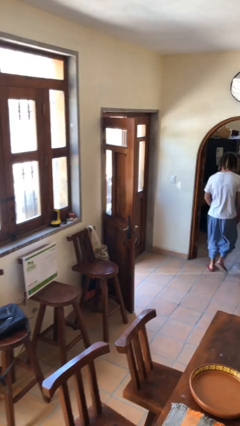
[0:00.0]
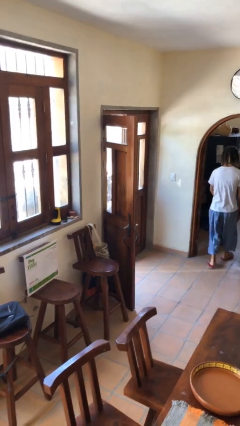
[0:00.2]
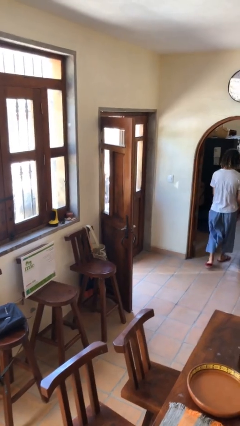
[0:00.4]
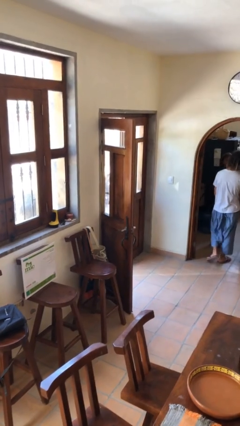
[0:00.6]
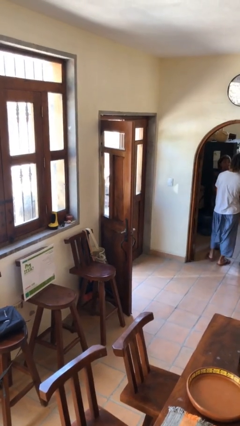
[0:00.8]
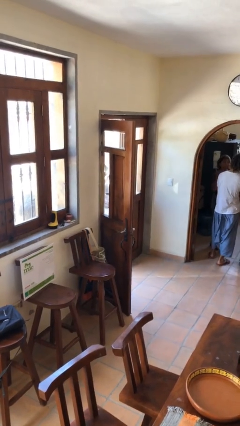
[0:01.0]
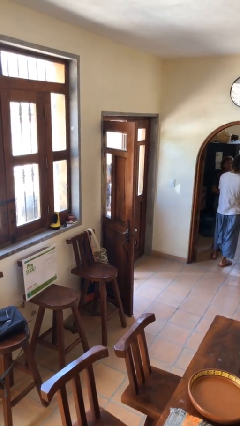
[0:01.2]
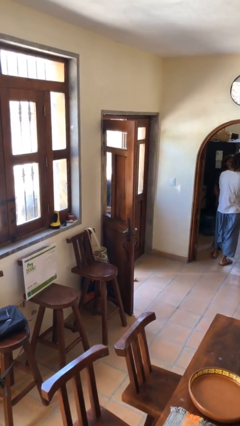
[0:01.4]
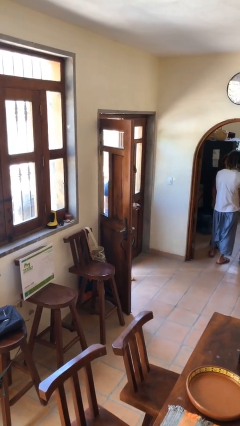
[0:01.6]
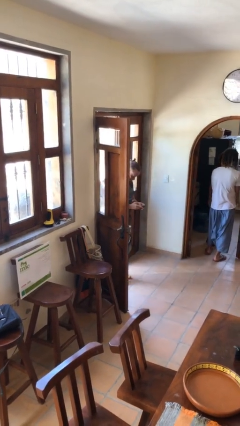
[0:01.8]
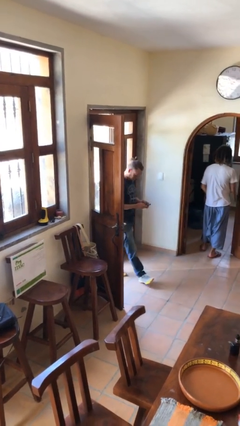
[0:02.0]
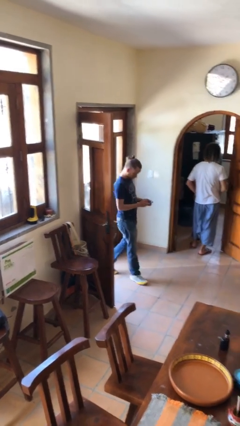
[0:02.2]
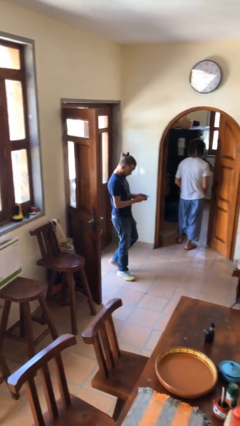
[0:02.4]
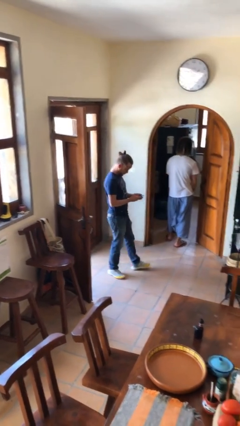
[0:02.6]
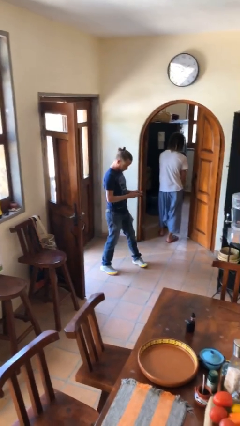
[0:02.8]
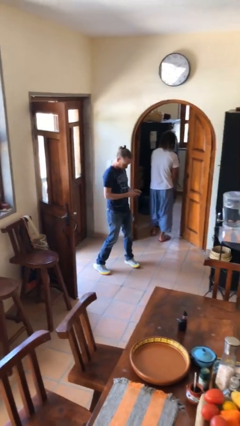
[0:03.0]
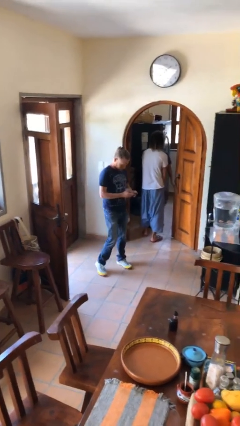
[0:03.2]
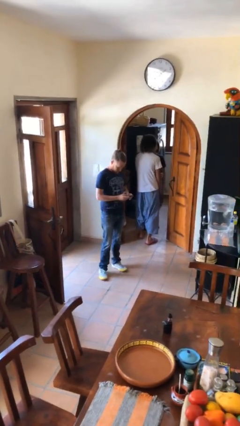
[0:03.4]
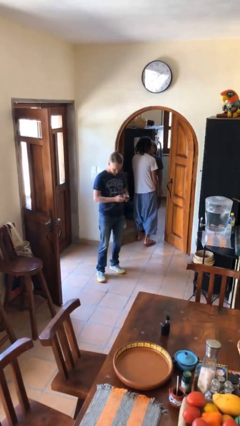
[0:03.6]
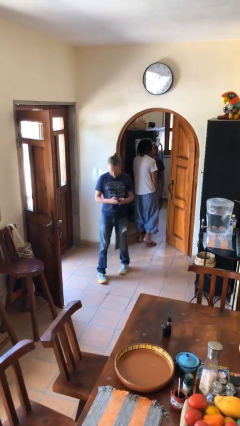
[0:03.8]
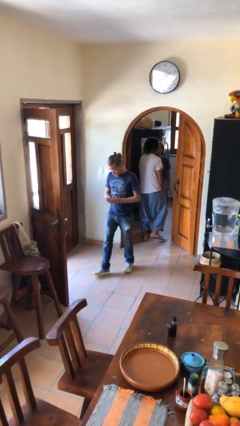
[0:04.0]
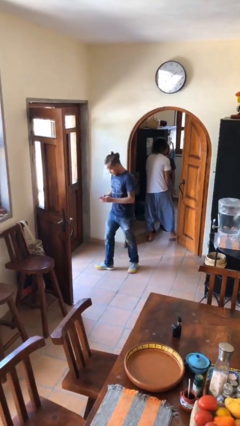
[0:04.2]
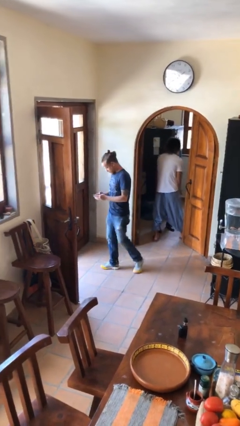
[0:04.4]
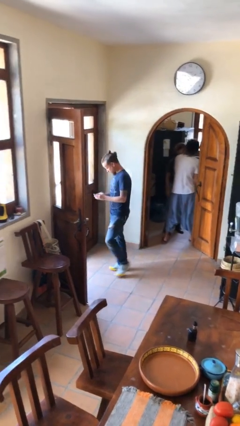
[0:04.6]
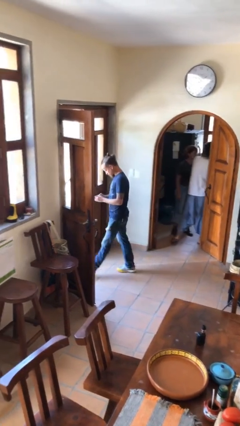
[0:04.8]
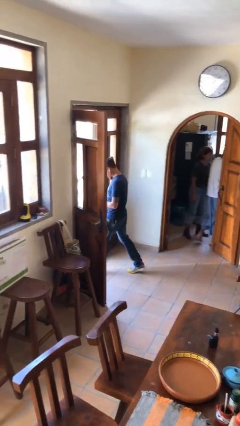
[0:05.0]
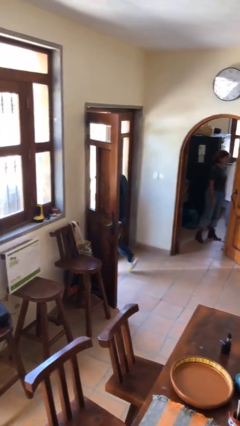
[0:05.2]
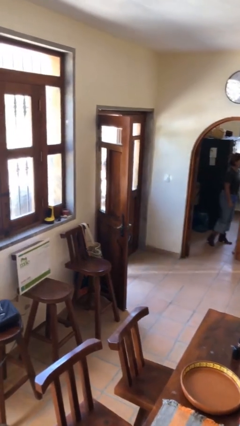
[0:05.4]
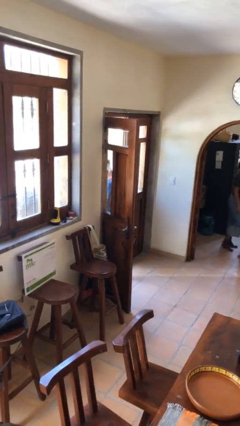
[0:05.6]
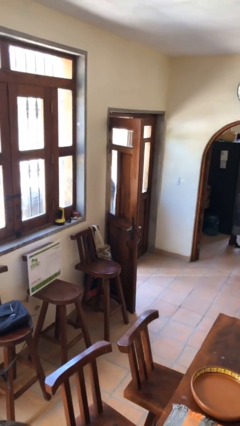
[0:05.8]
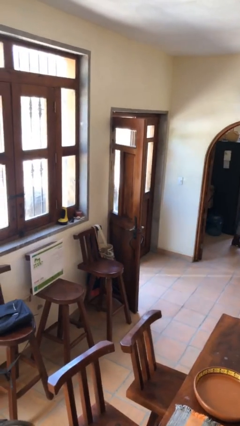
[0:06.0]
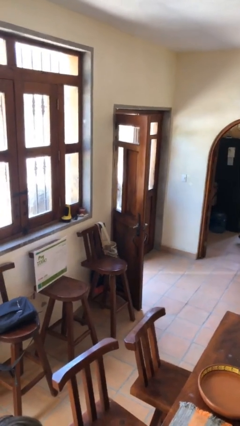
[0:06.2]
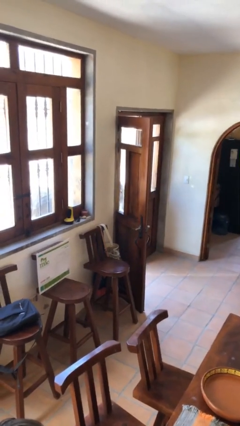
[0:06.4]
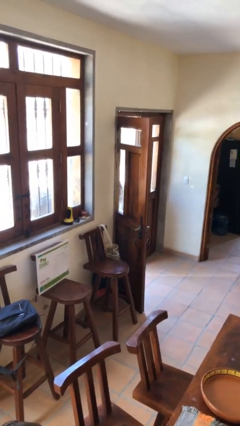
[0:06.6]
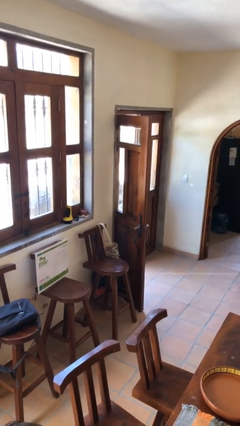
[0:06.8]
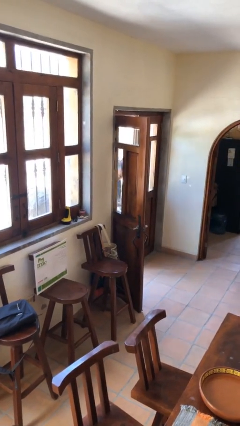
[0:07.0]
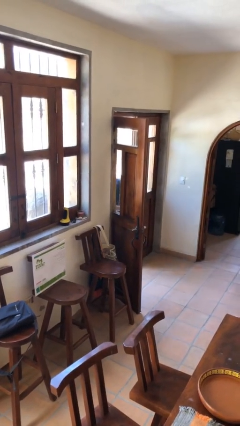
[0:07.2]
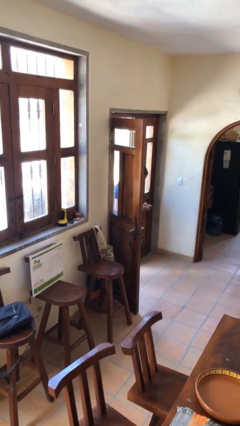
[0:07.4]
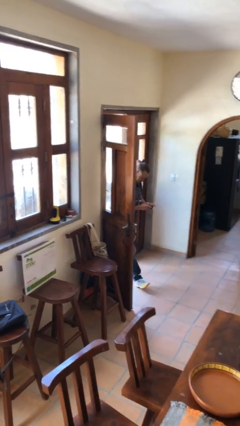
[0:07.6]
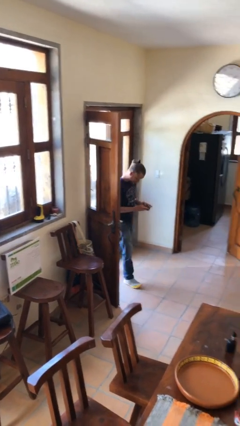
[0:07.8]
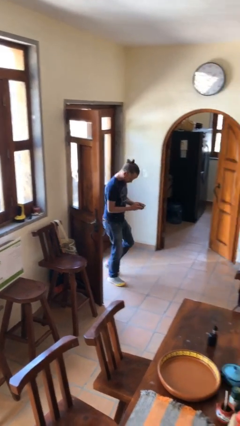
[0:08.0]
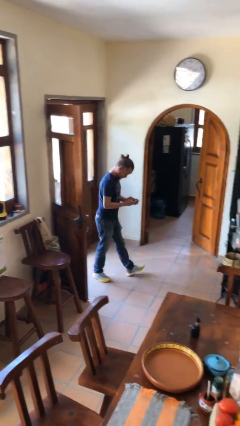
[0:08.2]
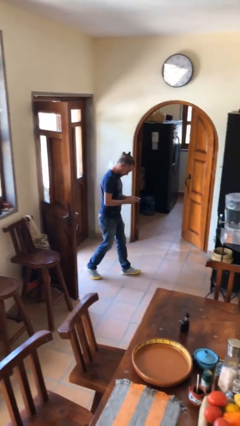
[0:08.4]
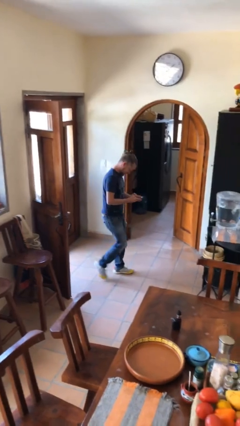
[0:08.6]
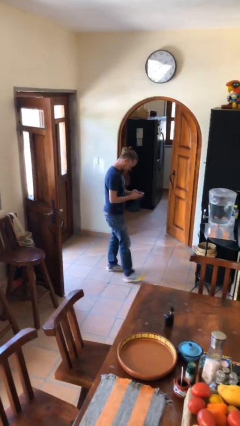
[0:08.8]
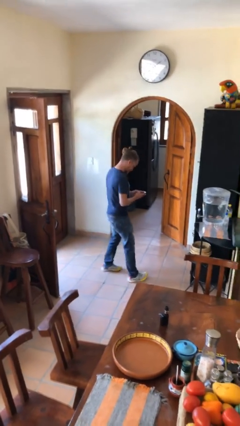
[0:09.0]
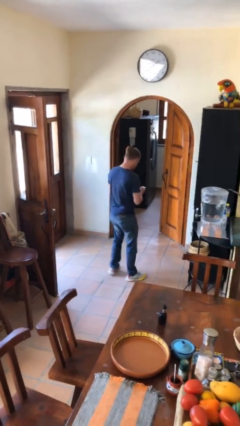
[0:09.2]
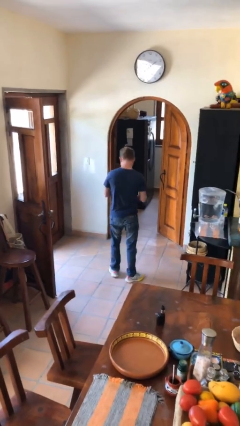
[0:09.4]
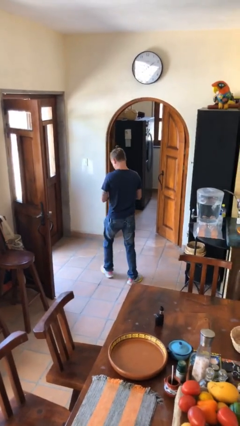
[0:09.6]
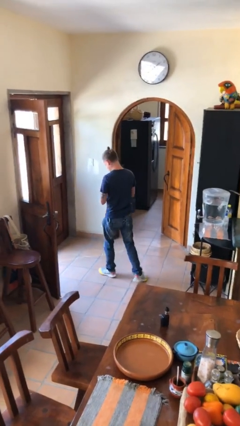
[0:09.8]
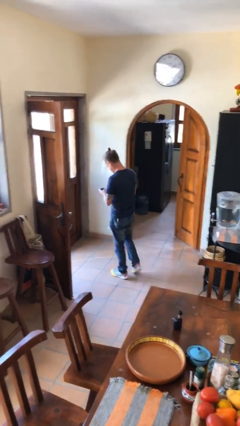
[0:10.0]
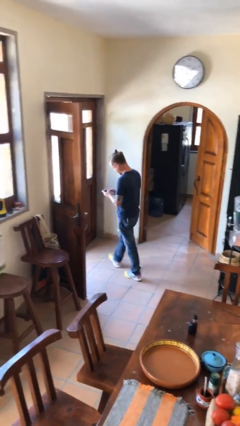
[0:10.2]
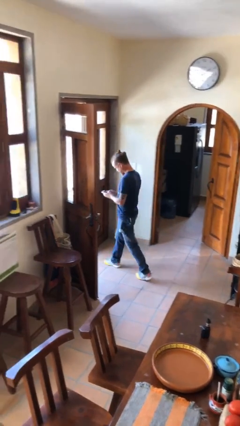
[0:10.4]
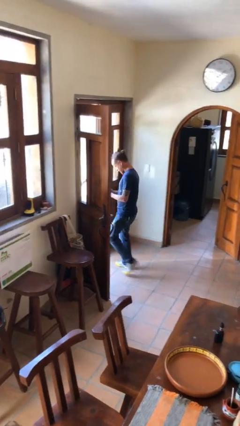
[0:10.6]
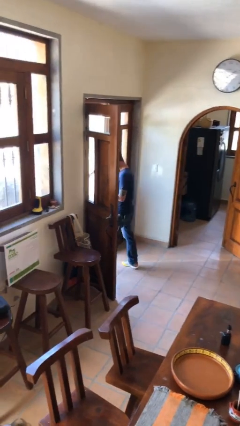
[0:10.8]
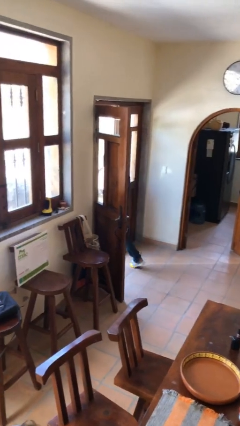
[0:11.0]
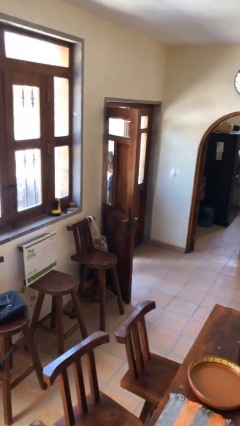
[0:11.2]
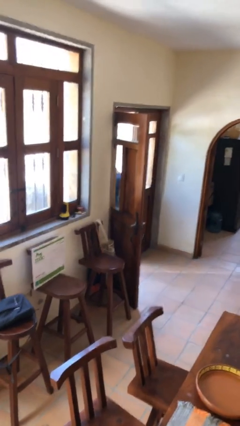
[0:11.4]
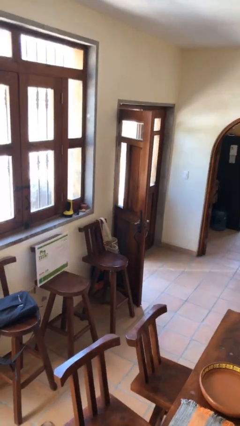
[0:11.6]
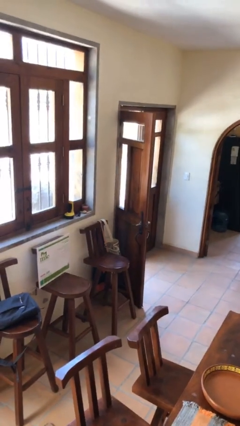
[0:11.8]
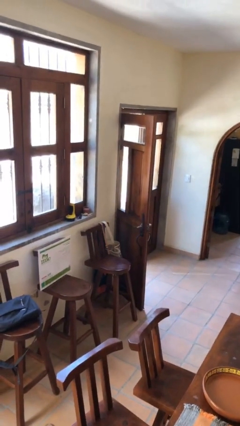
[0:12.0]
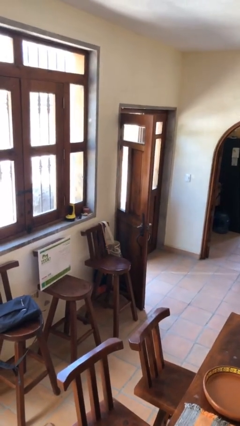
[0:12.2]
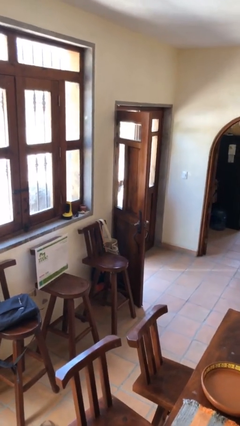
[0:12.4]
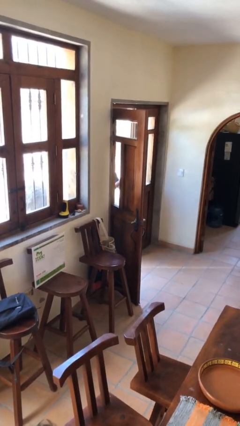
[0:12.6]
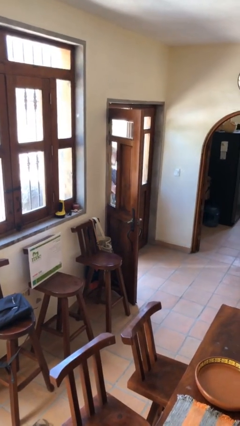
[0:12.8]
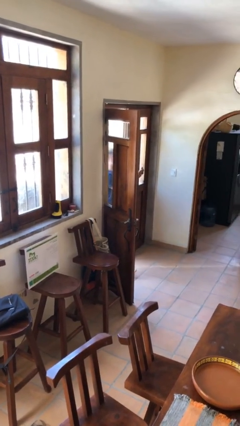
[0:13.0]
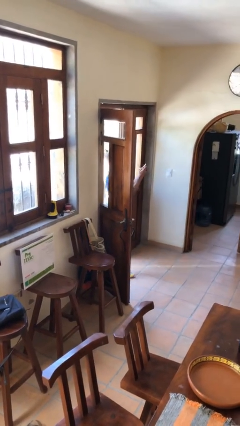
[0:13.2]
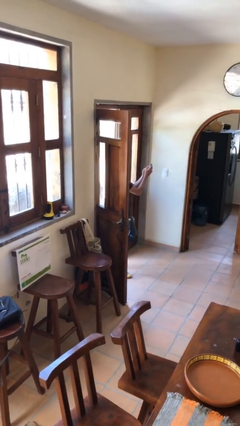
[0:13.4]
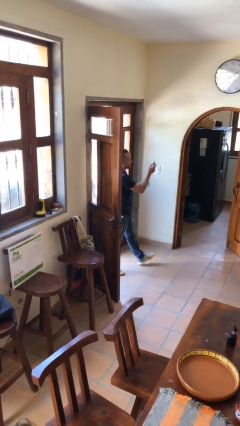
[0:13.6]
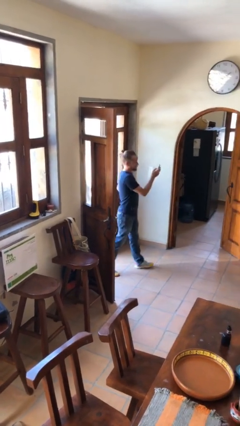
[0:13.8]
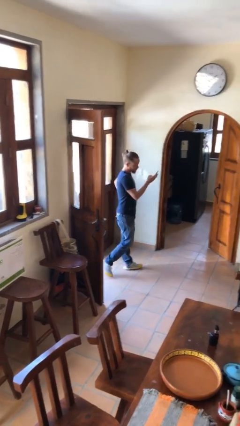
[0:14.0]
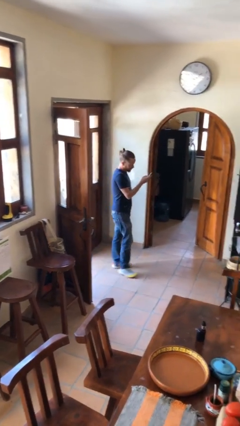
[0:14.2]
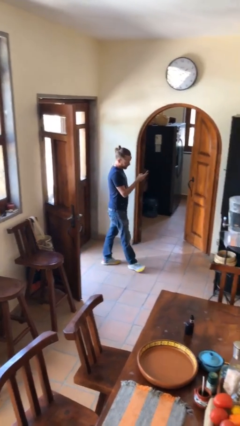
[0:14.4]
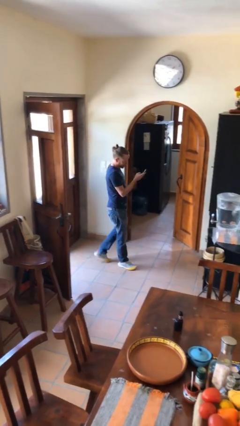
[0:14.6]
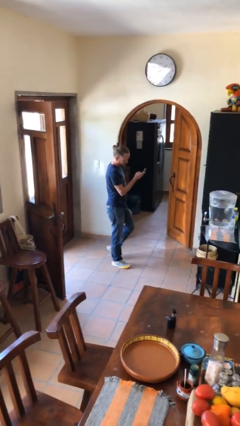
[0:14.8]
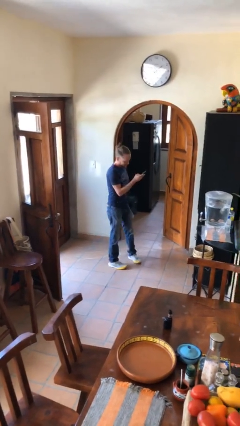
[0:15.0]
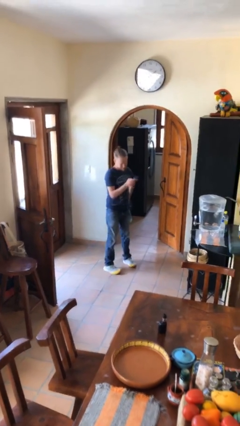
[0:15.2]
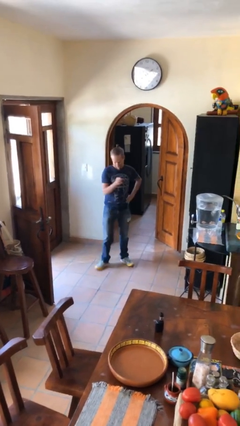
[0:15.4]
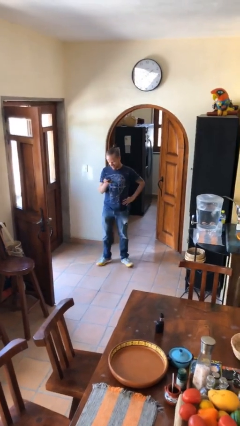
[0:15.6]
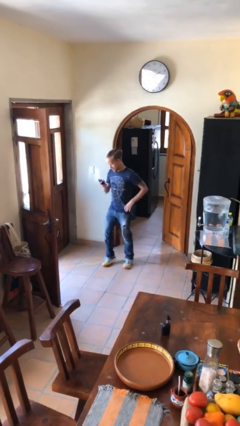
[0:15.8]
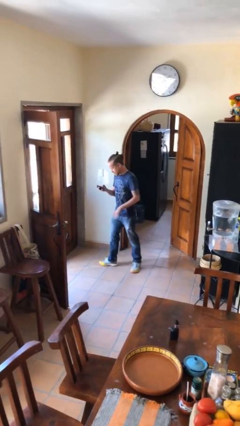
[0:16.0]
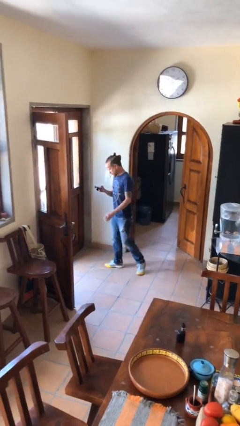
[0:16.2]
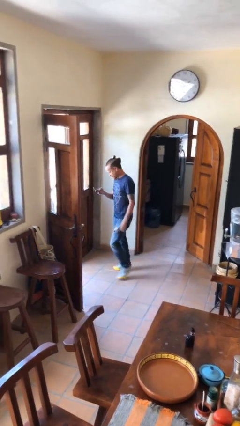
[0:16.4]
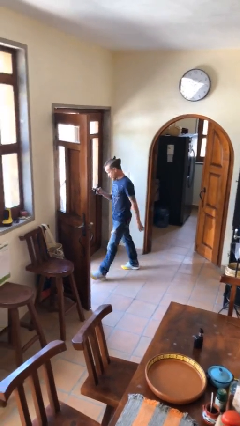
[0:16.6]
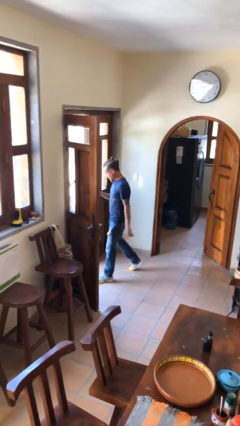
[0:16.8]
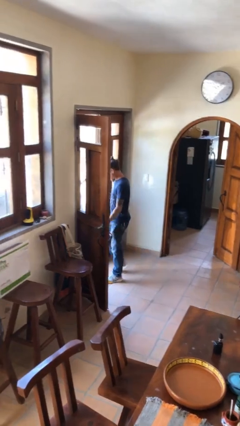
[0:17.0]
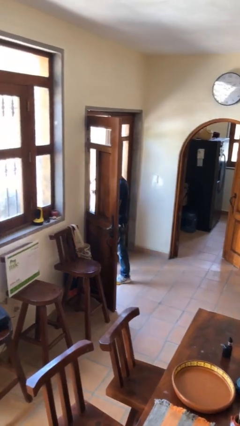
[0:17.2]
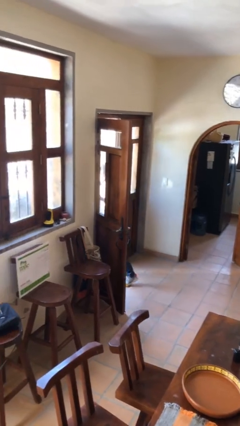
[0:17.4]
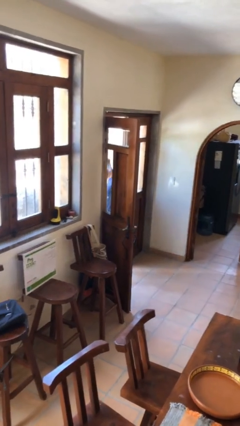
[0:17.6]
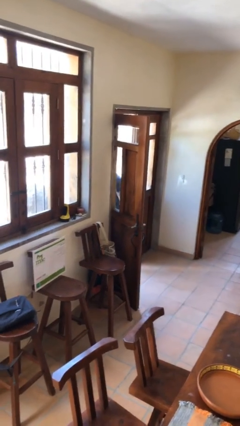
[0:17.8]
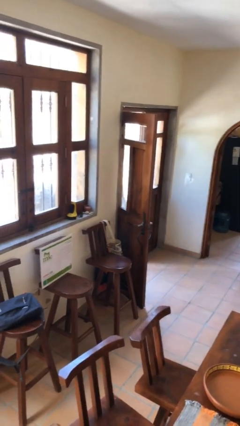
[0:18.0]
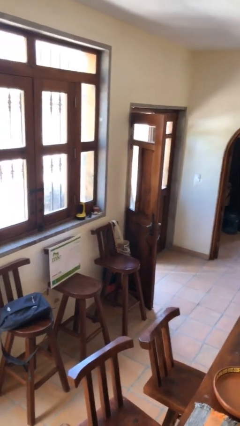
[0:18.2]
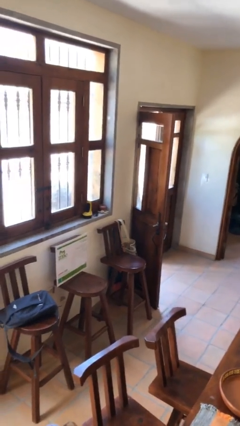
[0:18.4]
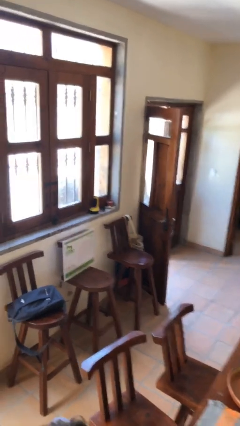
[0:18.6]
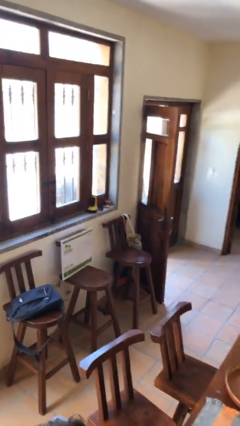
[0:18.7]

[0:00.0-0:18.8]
person texts on phone
